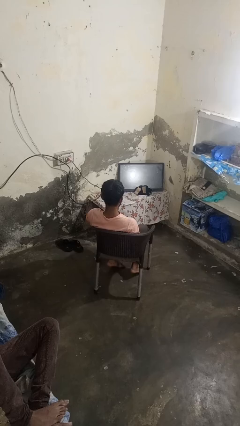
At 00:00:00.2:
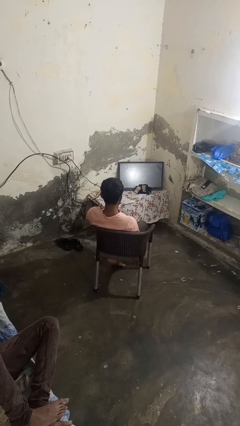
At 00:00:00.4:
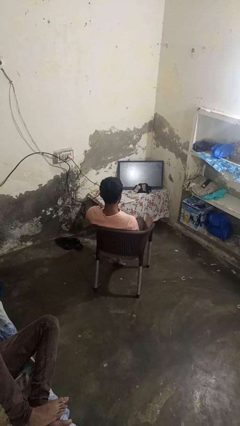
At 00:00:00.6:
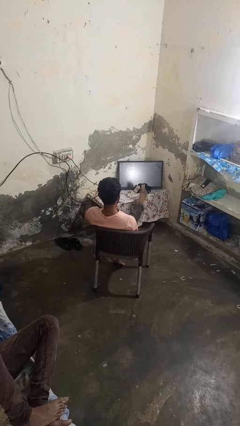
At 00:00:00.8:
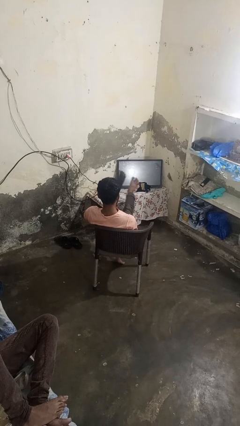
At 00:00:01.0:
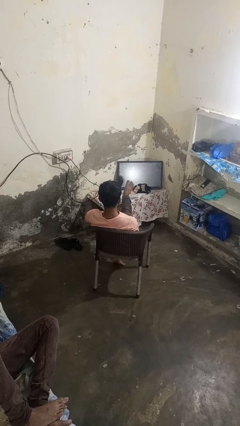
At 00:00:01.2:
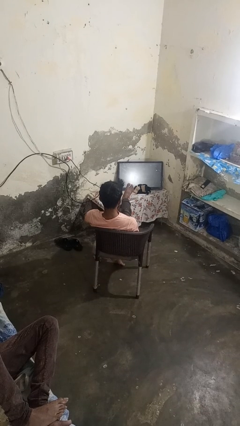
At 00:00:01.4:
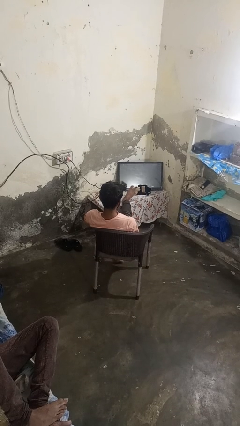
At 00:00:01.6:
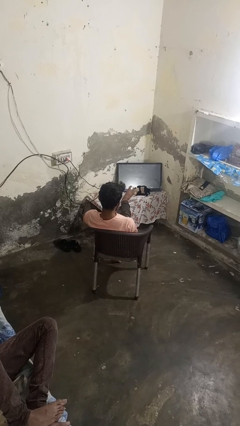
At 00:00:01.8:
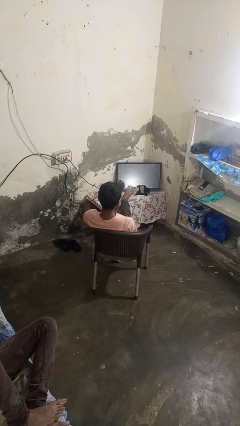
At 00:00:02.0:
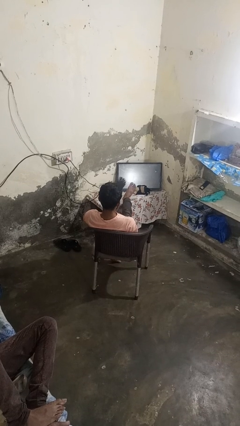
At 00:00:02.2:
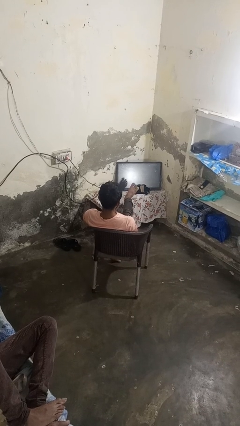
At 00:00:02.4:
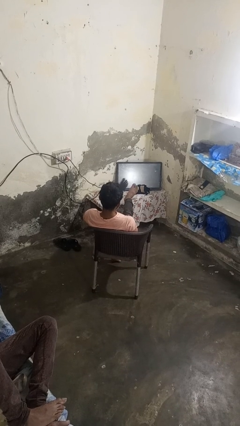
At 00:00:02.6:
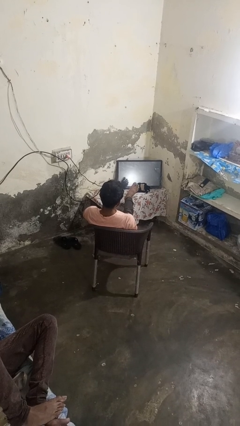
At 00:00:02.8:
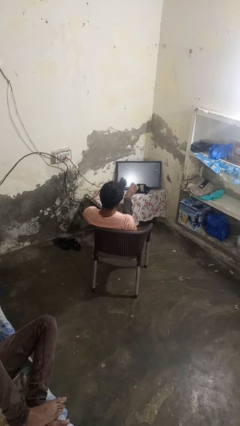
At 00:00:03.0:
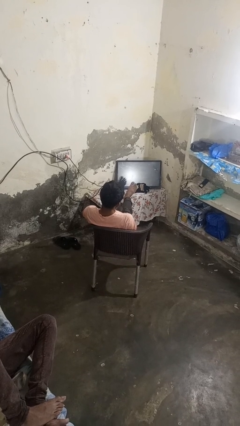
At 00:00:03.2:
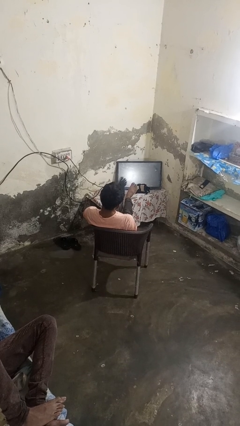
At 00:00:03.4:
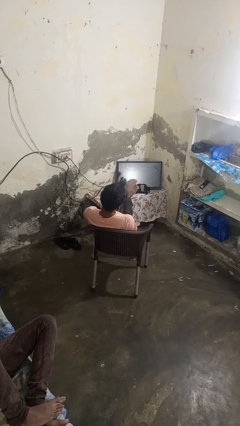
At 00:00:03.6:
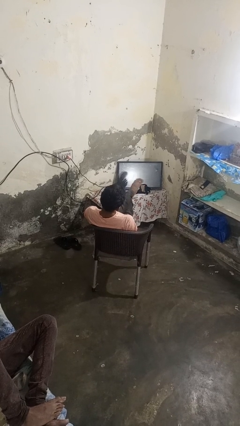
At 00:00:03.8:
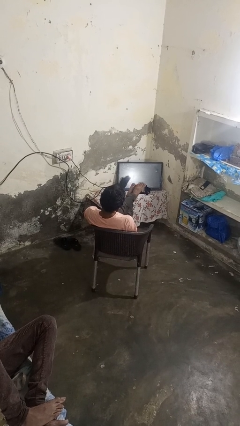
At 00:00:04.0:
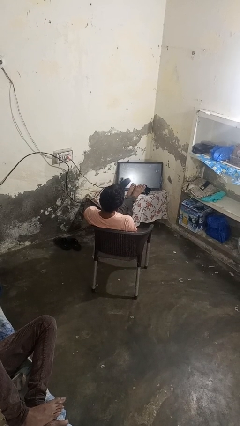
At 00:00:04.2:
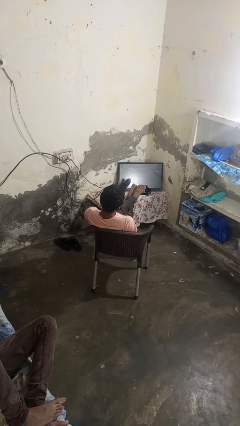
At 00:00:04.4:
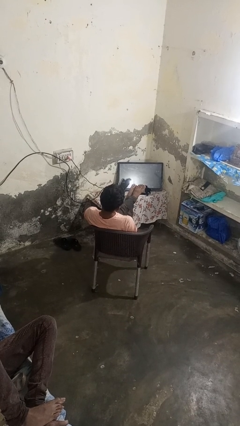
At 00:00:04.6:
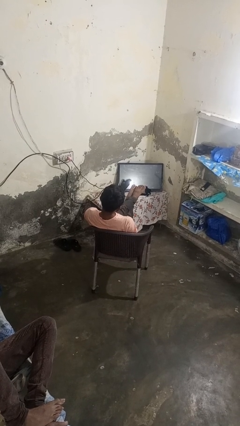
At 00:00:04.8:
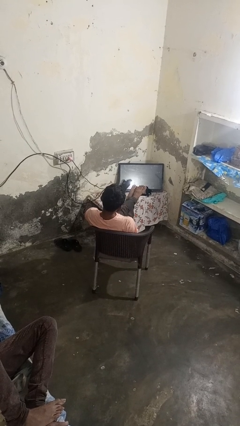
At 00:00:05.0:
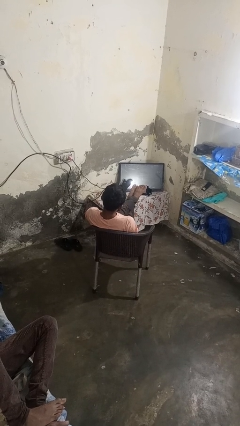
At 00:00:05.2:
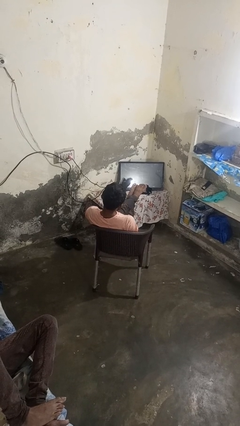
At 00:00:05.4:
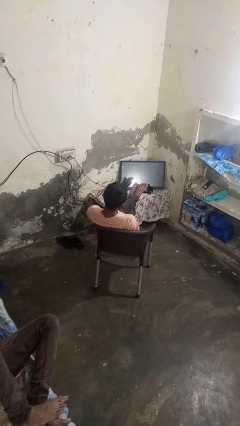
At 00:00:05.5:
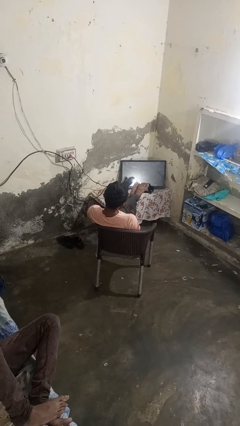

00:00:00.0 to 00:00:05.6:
person puts feet up

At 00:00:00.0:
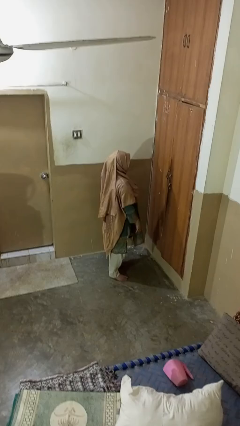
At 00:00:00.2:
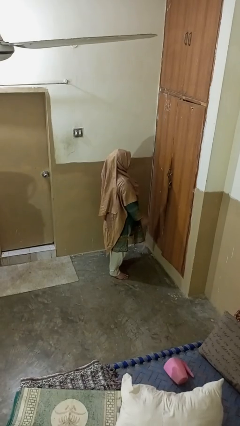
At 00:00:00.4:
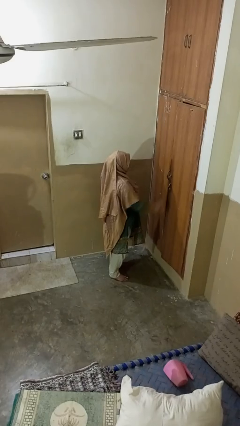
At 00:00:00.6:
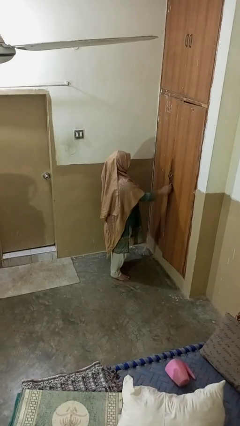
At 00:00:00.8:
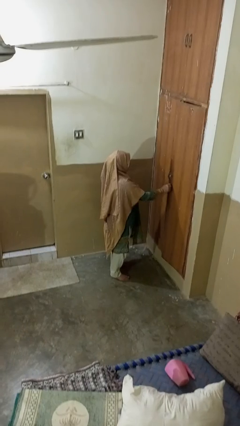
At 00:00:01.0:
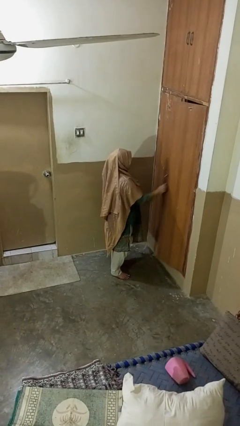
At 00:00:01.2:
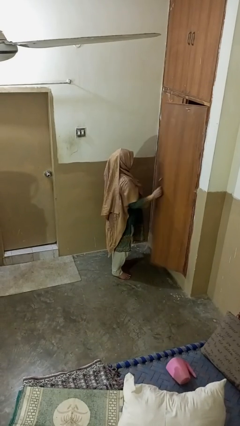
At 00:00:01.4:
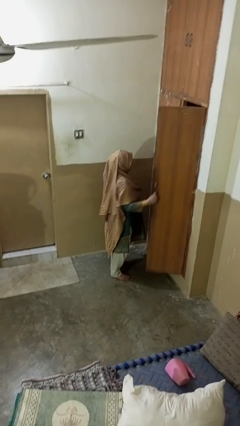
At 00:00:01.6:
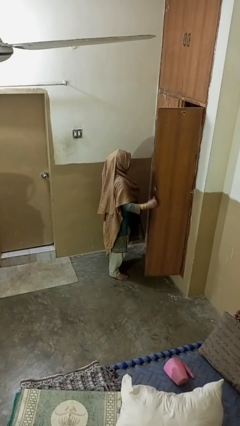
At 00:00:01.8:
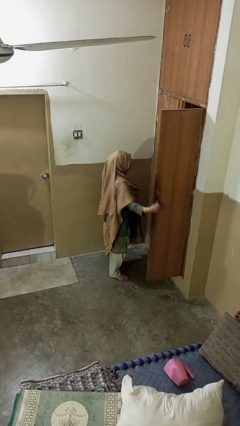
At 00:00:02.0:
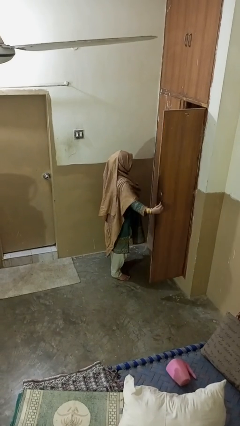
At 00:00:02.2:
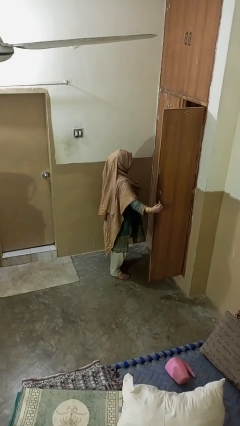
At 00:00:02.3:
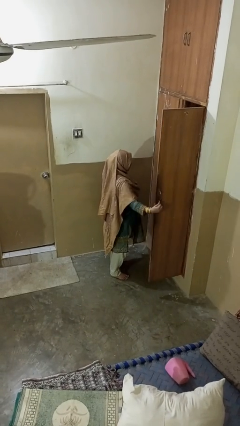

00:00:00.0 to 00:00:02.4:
person opens closet door

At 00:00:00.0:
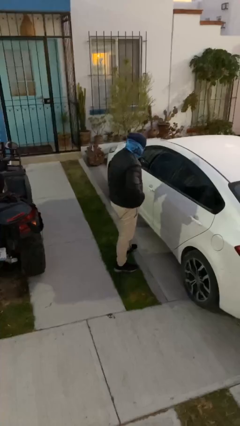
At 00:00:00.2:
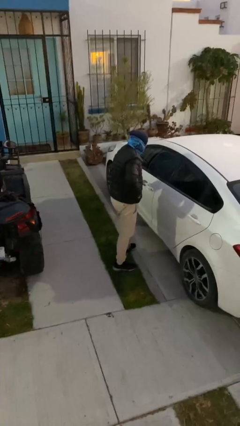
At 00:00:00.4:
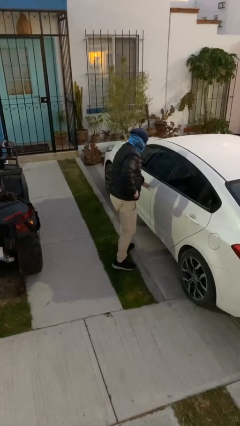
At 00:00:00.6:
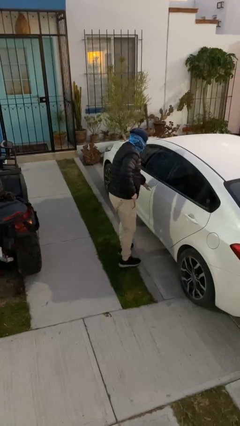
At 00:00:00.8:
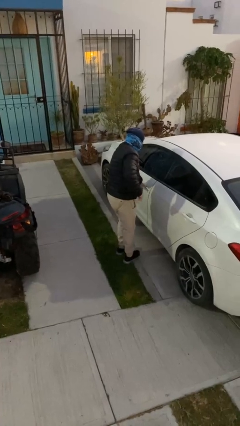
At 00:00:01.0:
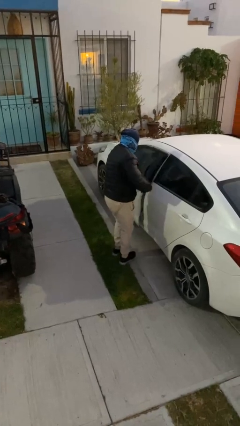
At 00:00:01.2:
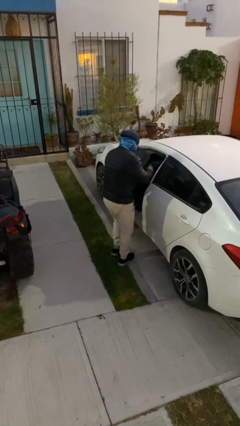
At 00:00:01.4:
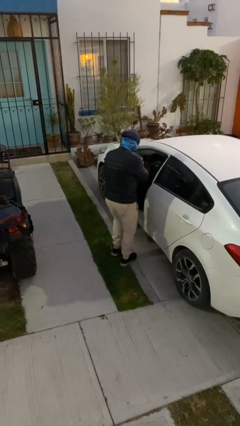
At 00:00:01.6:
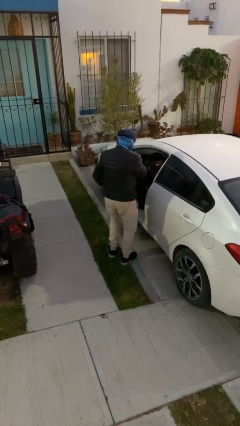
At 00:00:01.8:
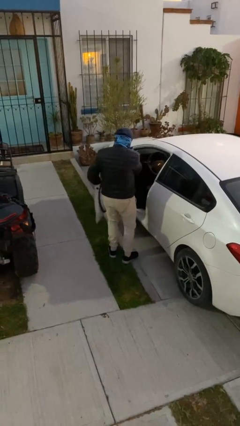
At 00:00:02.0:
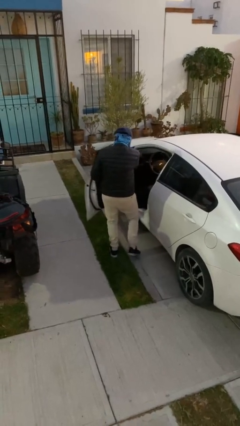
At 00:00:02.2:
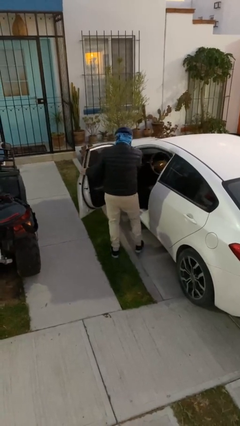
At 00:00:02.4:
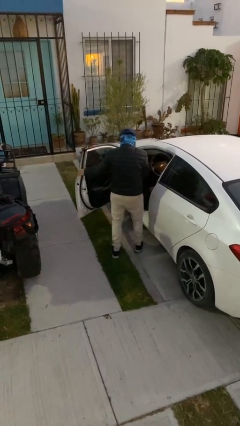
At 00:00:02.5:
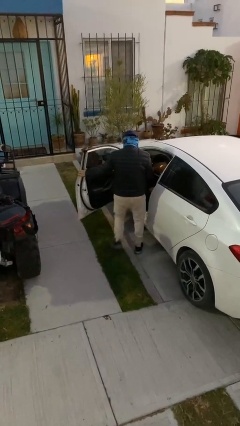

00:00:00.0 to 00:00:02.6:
person opens car door

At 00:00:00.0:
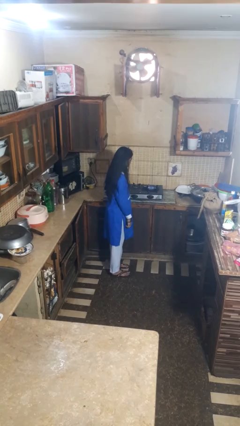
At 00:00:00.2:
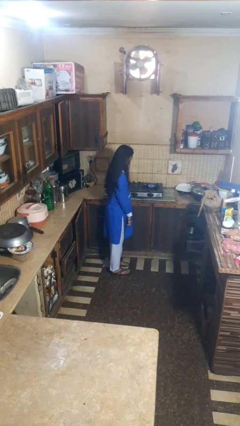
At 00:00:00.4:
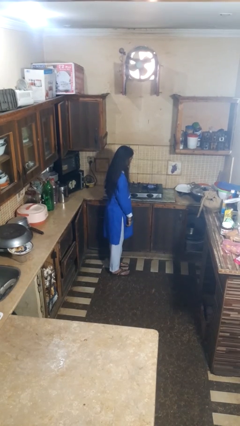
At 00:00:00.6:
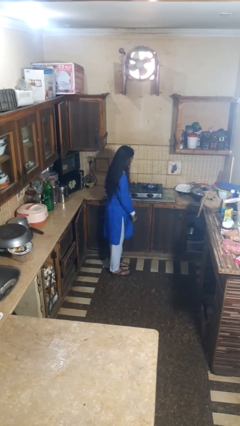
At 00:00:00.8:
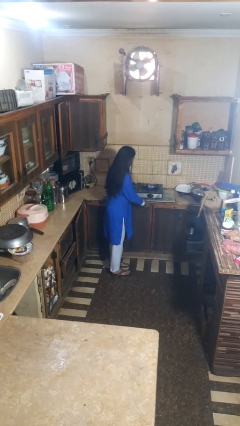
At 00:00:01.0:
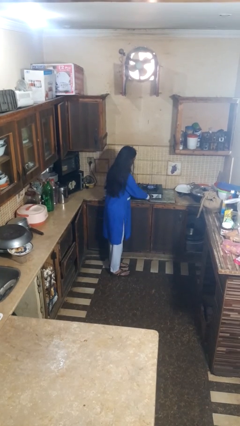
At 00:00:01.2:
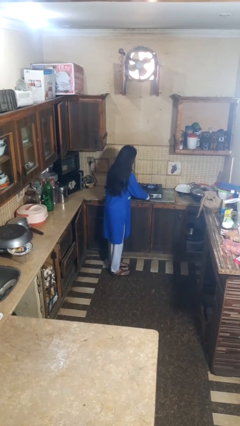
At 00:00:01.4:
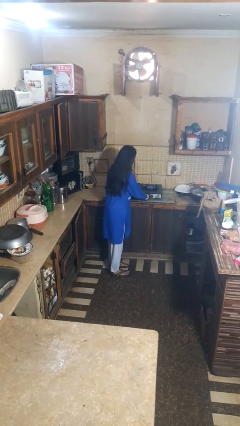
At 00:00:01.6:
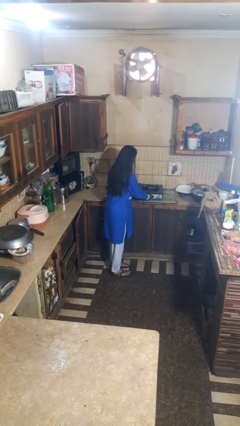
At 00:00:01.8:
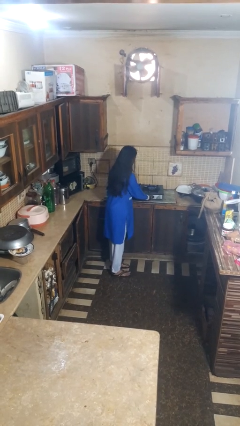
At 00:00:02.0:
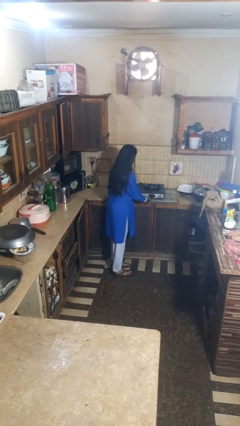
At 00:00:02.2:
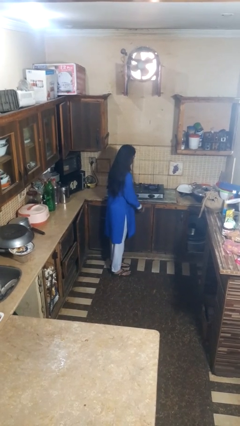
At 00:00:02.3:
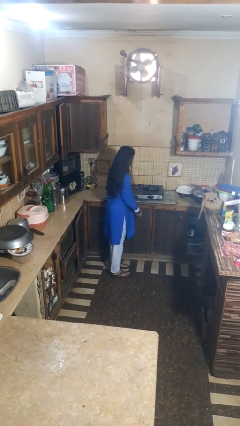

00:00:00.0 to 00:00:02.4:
person turns off stovetop

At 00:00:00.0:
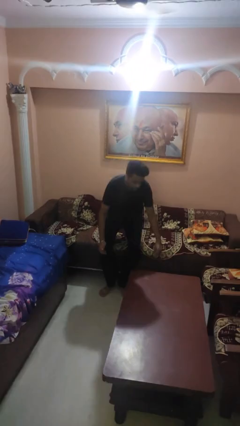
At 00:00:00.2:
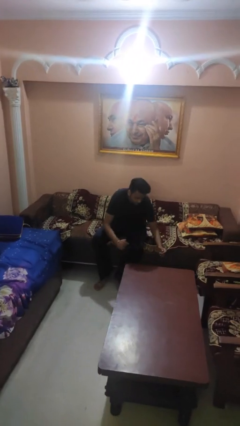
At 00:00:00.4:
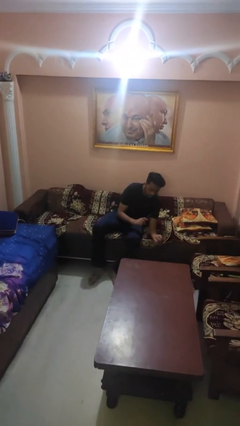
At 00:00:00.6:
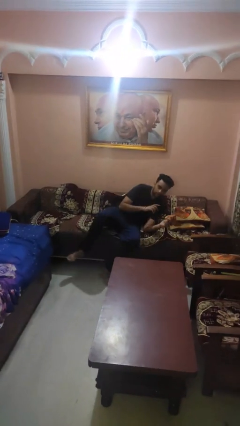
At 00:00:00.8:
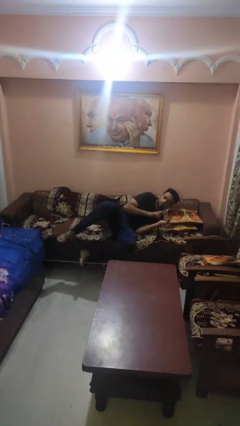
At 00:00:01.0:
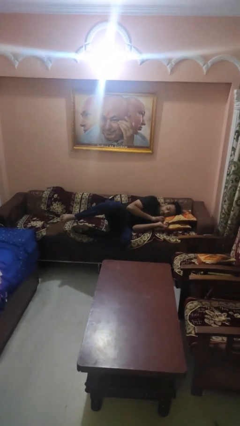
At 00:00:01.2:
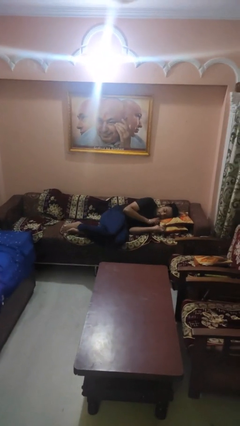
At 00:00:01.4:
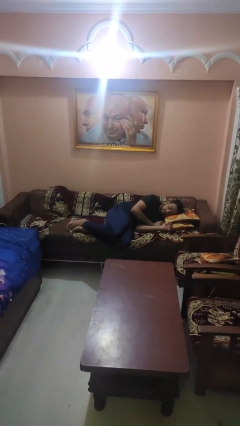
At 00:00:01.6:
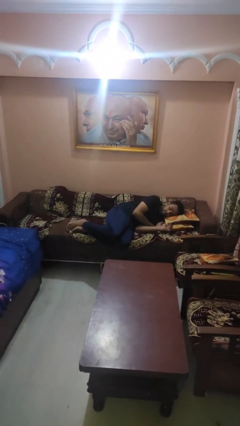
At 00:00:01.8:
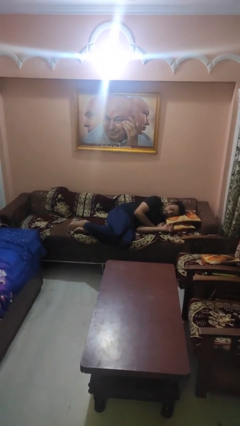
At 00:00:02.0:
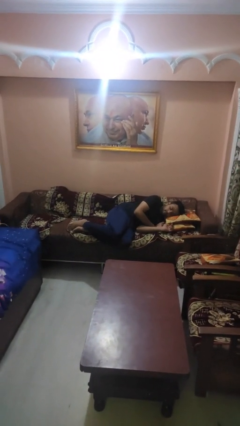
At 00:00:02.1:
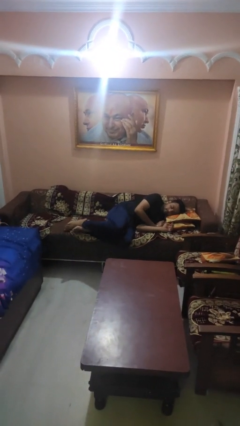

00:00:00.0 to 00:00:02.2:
person lies down on couch

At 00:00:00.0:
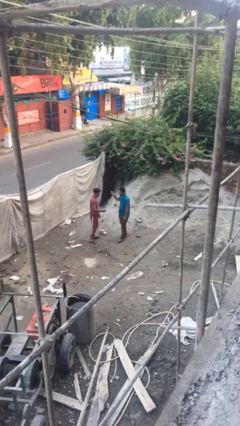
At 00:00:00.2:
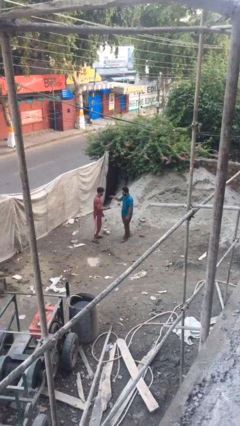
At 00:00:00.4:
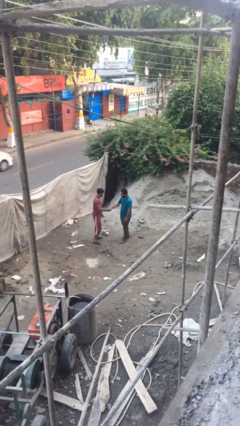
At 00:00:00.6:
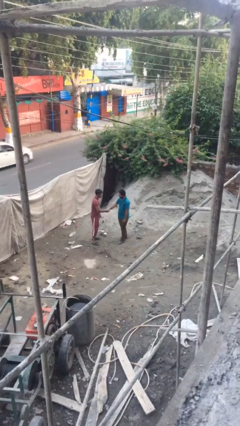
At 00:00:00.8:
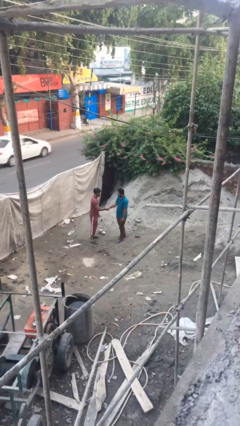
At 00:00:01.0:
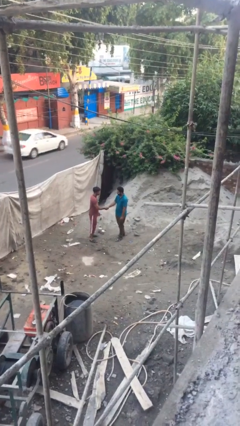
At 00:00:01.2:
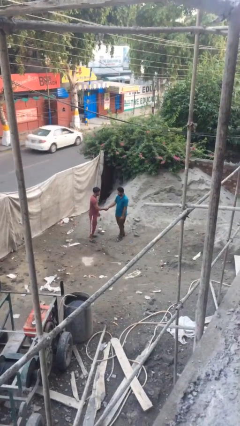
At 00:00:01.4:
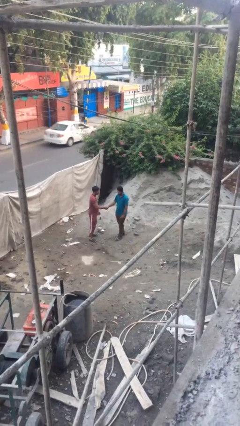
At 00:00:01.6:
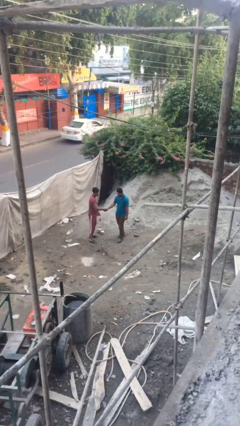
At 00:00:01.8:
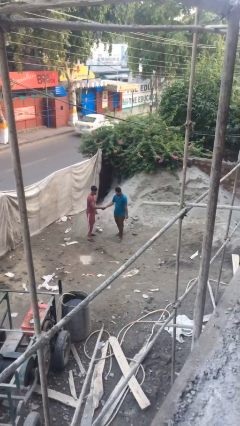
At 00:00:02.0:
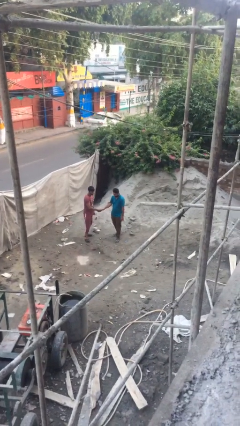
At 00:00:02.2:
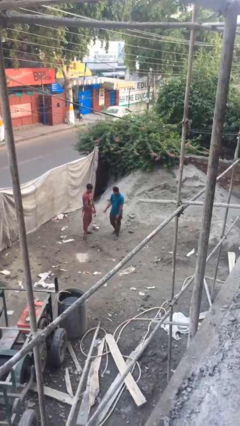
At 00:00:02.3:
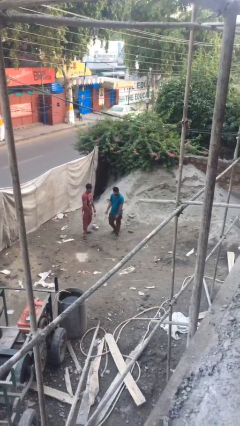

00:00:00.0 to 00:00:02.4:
person shakes hand
